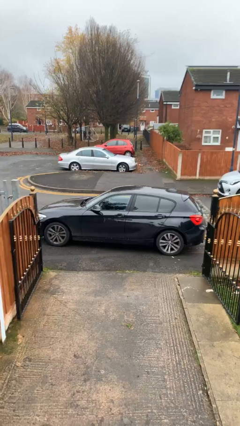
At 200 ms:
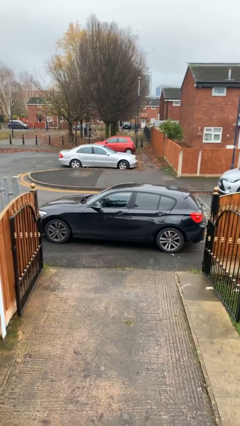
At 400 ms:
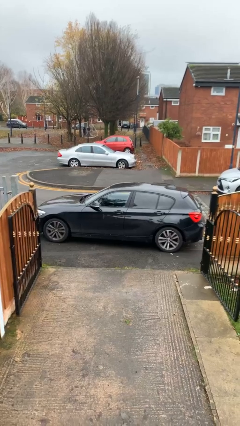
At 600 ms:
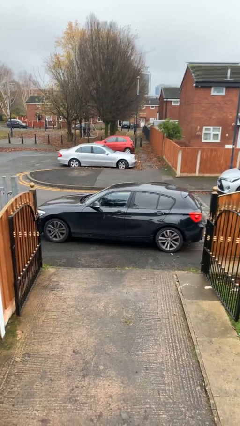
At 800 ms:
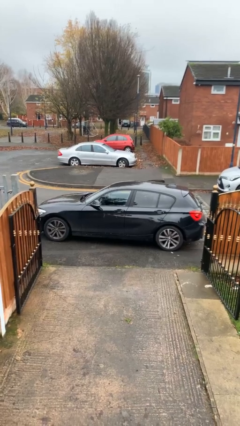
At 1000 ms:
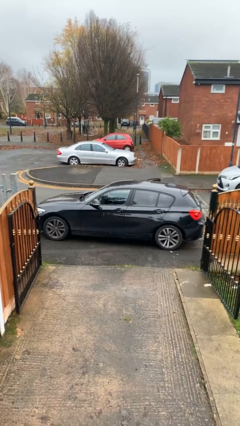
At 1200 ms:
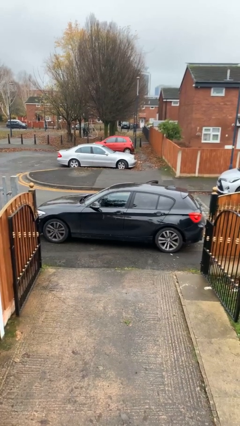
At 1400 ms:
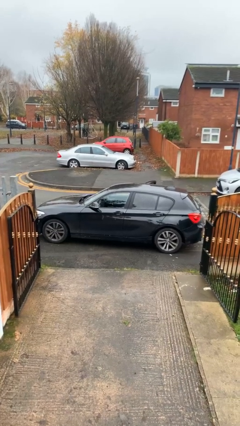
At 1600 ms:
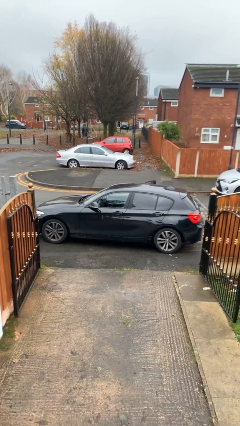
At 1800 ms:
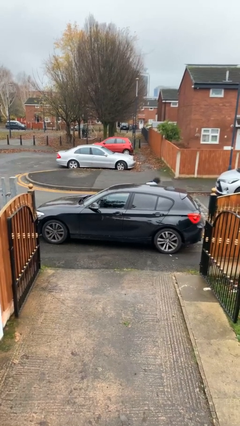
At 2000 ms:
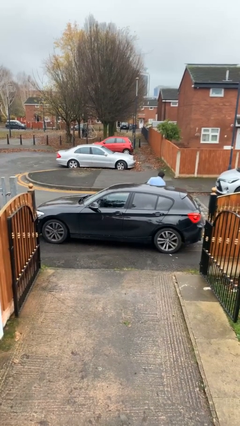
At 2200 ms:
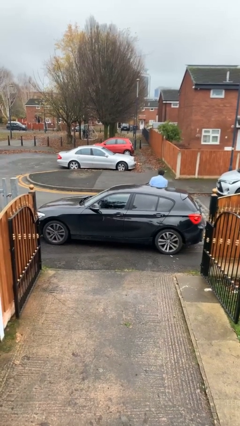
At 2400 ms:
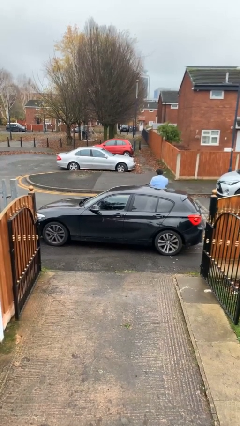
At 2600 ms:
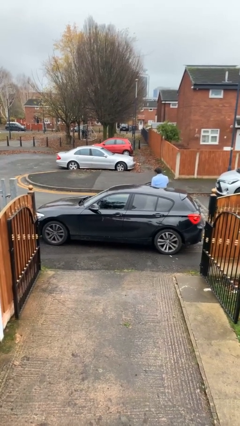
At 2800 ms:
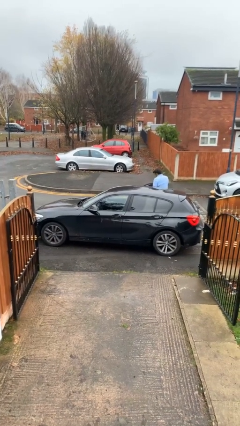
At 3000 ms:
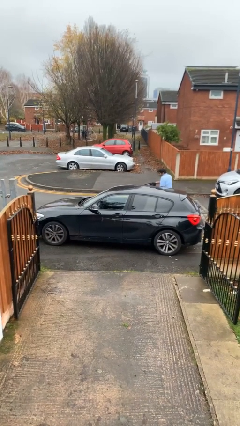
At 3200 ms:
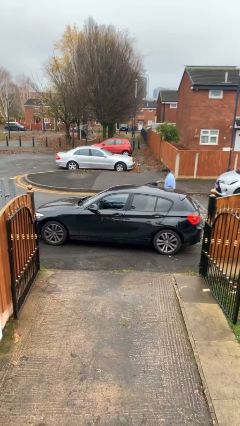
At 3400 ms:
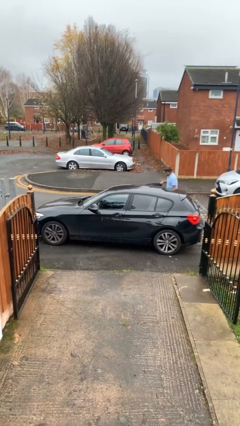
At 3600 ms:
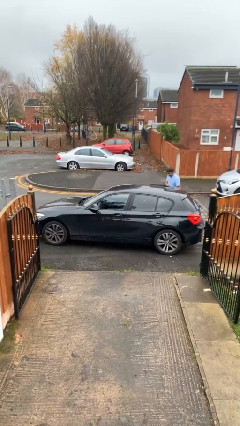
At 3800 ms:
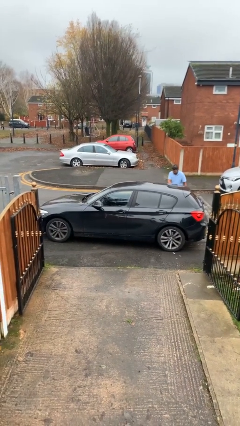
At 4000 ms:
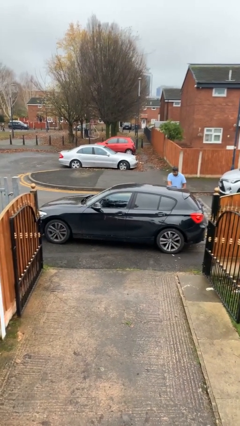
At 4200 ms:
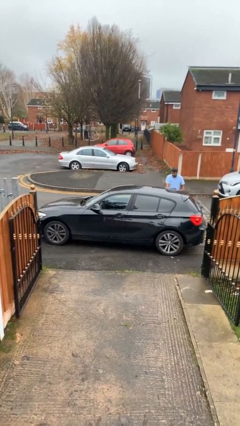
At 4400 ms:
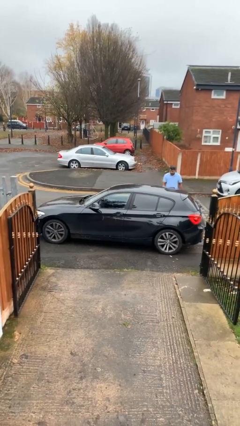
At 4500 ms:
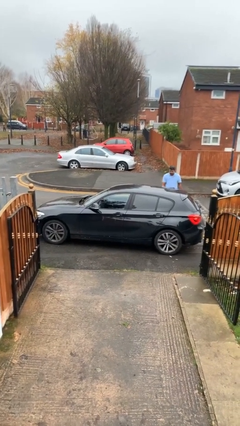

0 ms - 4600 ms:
car drops off person

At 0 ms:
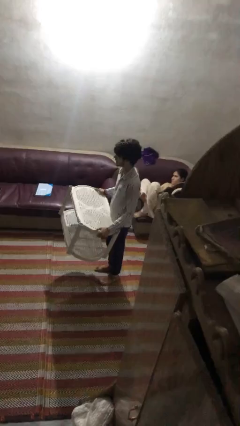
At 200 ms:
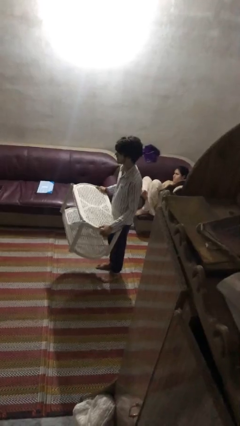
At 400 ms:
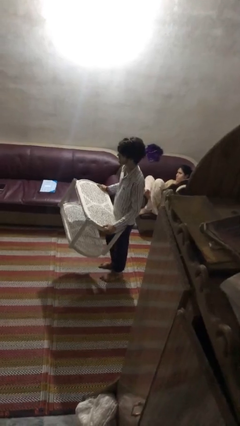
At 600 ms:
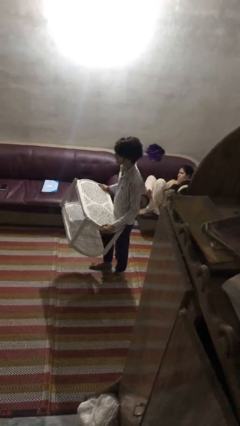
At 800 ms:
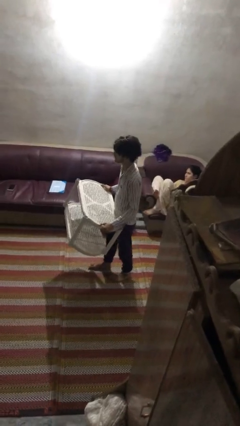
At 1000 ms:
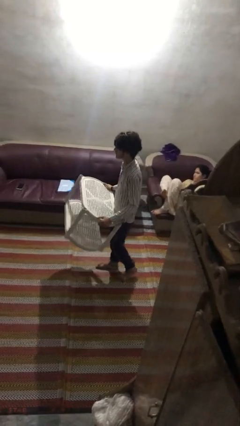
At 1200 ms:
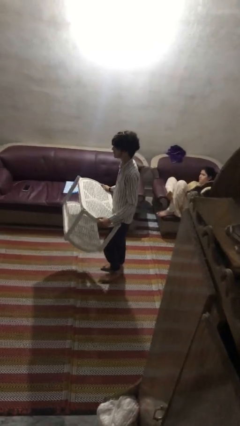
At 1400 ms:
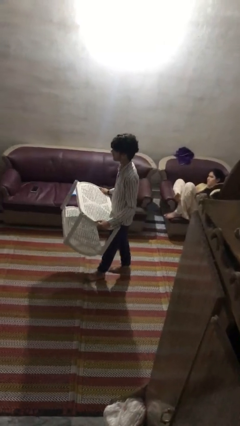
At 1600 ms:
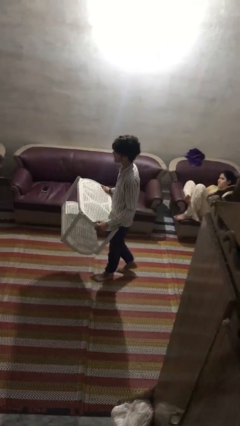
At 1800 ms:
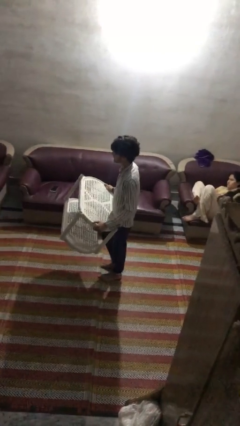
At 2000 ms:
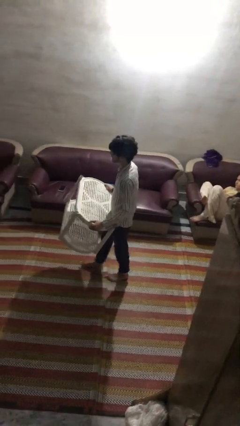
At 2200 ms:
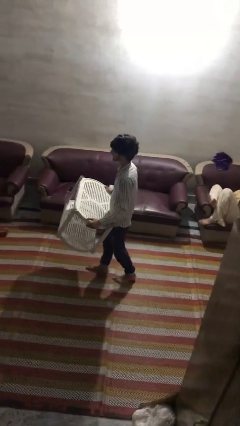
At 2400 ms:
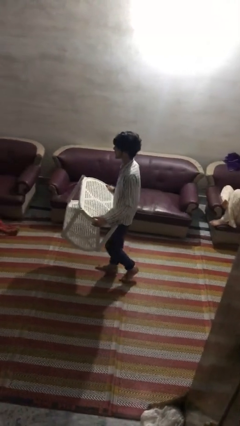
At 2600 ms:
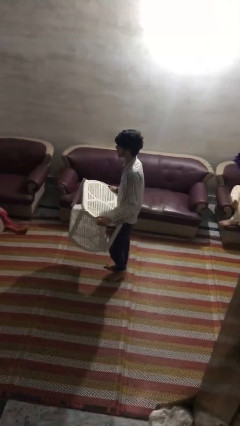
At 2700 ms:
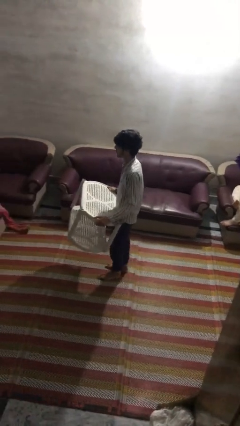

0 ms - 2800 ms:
person carries furniture

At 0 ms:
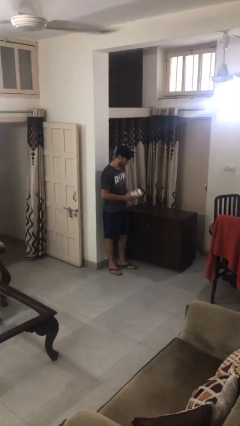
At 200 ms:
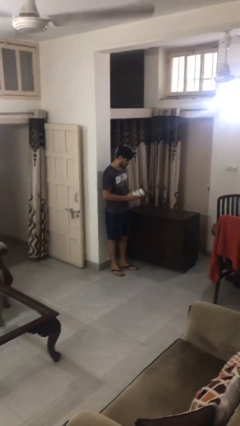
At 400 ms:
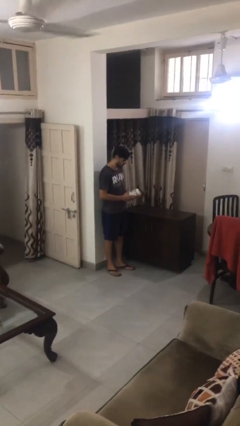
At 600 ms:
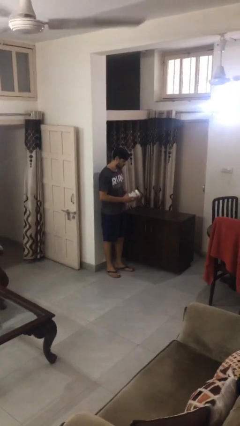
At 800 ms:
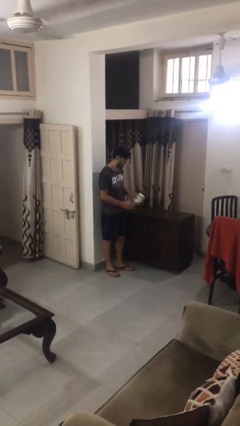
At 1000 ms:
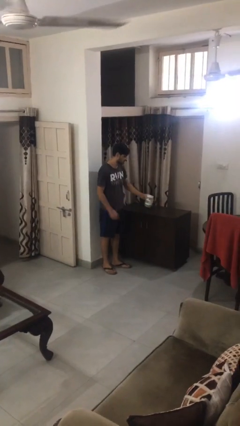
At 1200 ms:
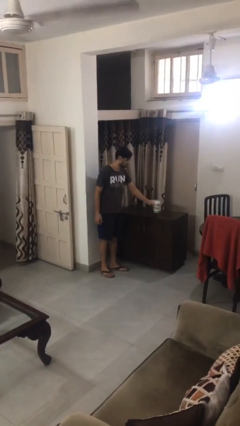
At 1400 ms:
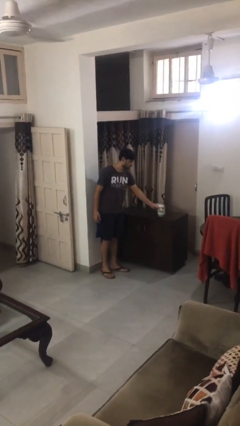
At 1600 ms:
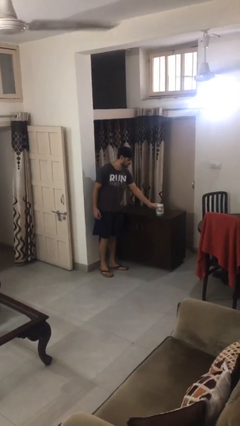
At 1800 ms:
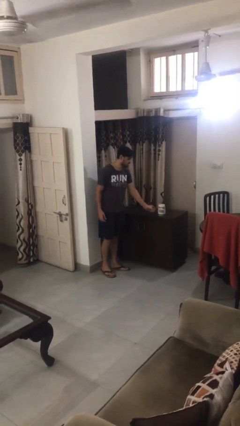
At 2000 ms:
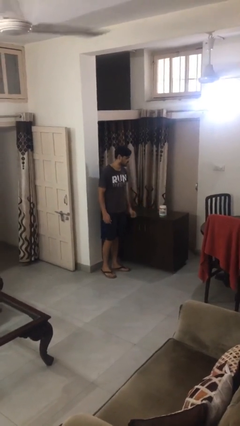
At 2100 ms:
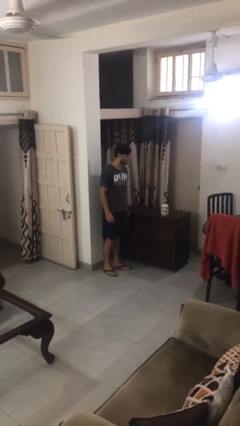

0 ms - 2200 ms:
person puts down object on countertop

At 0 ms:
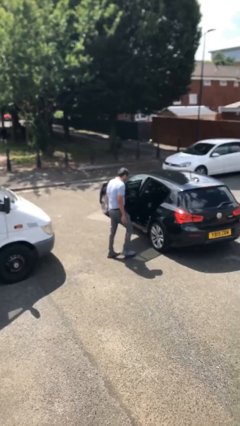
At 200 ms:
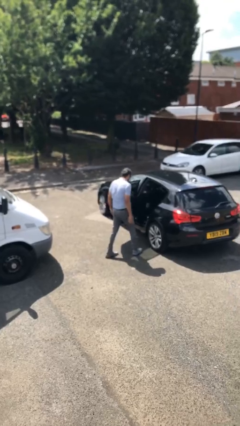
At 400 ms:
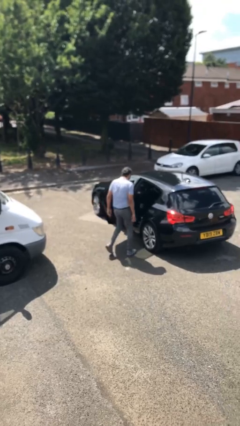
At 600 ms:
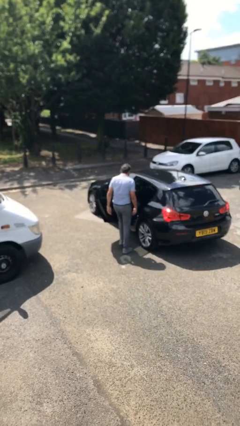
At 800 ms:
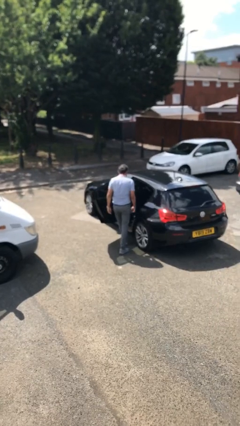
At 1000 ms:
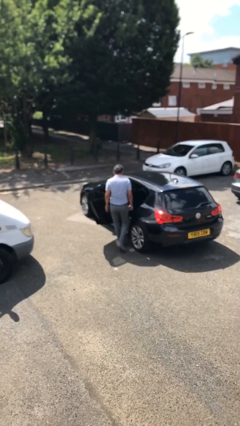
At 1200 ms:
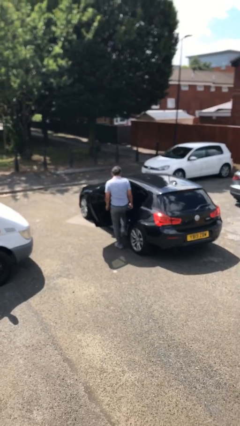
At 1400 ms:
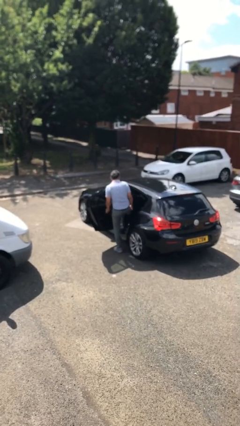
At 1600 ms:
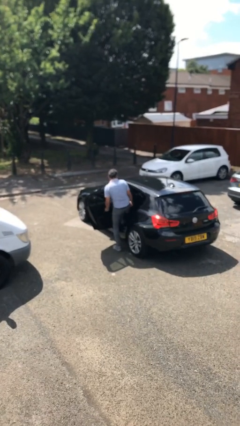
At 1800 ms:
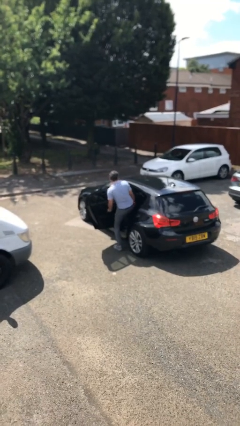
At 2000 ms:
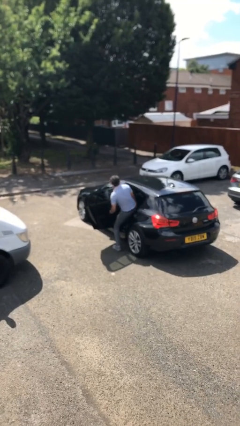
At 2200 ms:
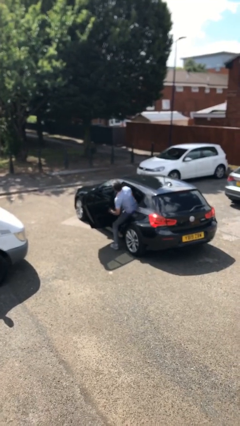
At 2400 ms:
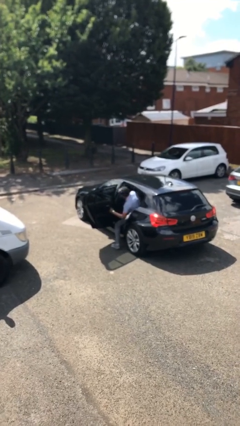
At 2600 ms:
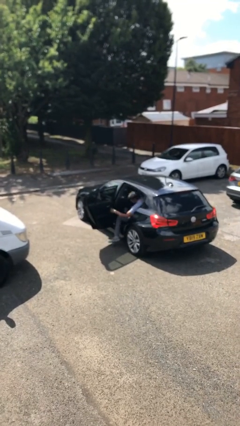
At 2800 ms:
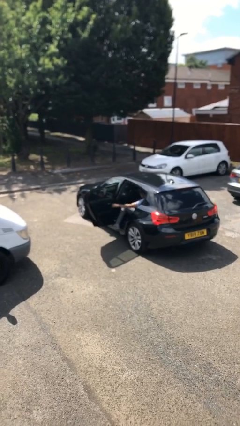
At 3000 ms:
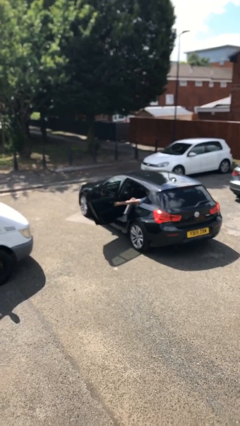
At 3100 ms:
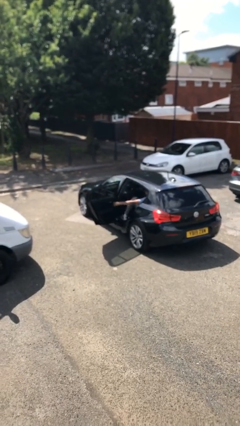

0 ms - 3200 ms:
person enters car

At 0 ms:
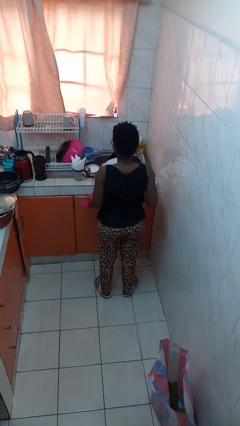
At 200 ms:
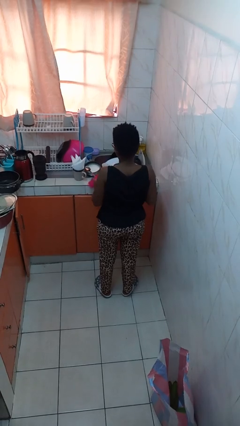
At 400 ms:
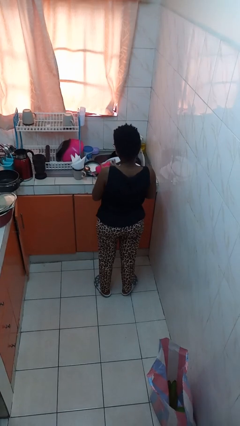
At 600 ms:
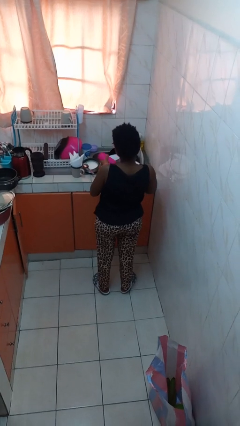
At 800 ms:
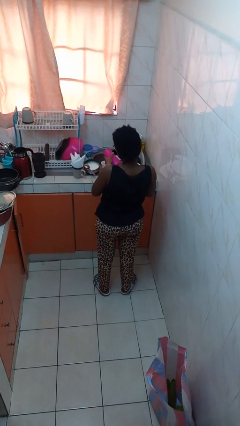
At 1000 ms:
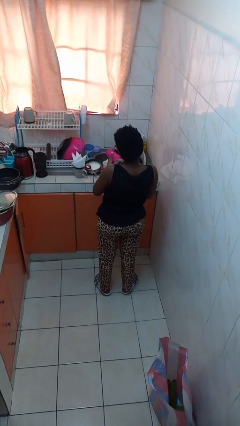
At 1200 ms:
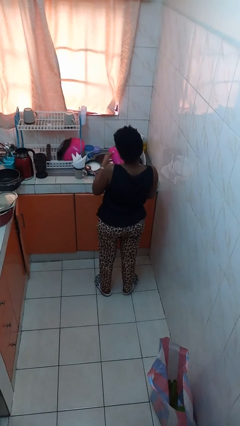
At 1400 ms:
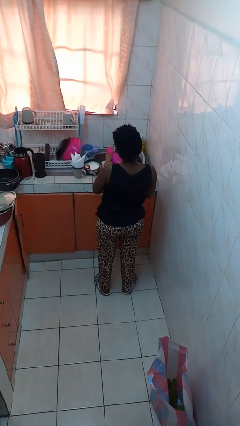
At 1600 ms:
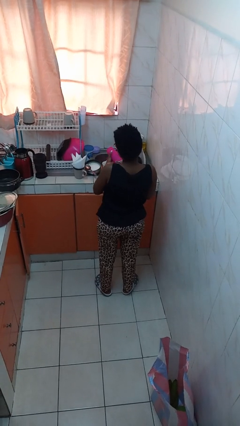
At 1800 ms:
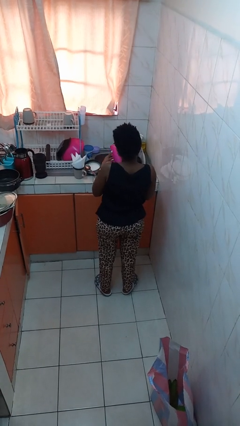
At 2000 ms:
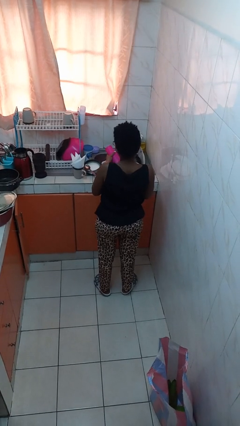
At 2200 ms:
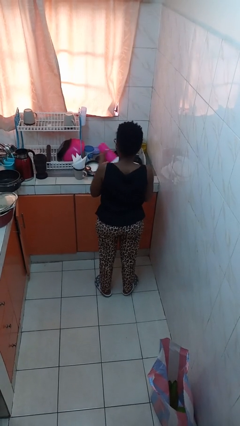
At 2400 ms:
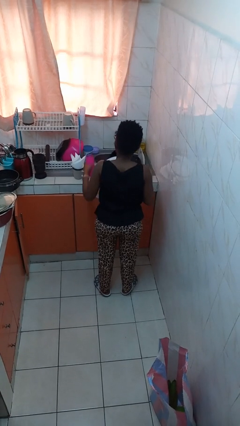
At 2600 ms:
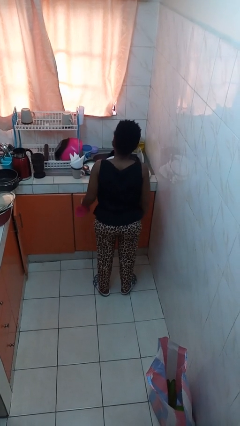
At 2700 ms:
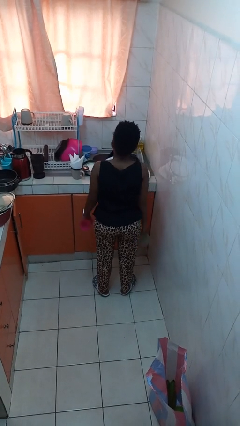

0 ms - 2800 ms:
person dries dish

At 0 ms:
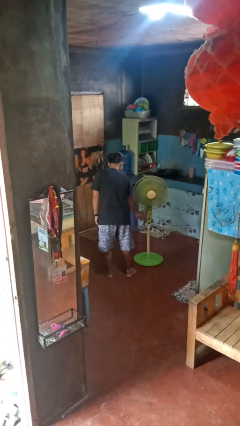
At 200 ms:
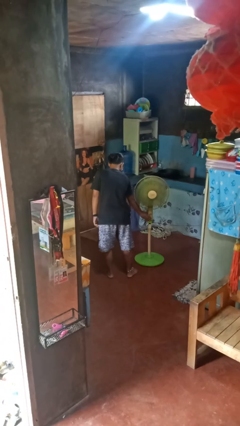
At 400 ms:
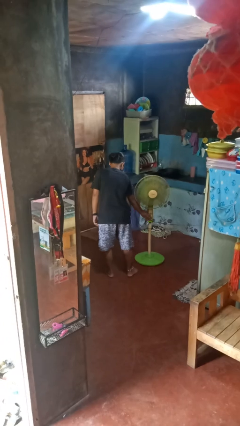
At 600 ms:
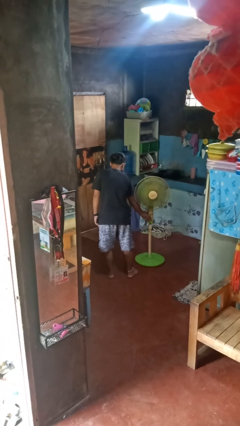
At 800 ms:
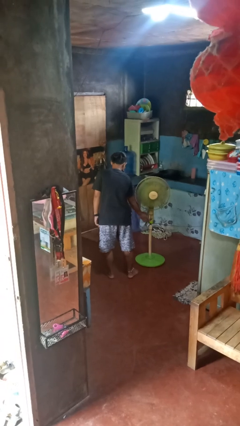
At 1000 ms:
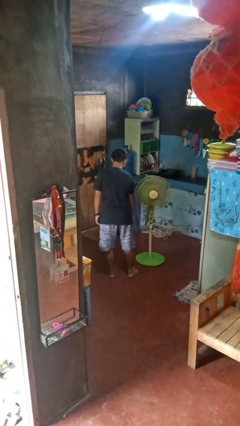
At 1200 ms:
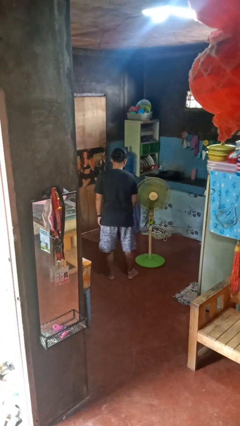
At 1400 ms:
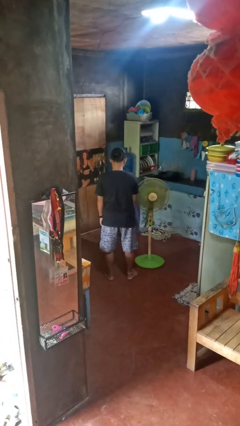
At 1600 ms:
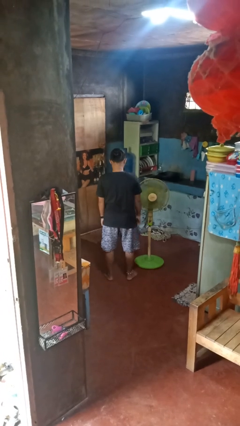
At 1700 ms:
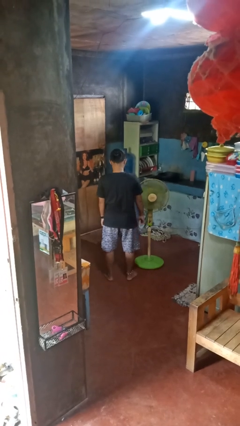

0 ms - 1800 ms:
person turns off fan
